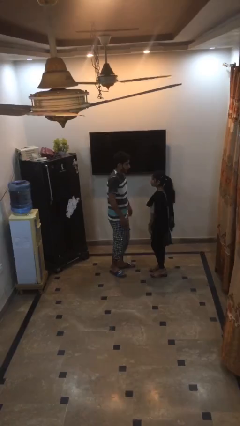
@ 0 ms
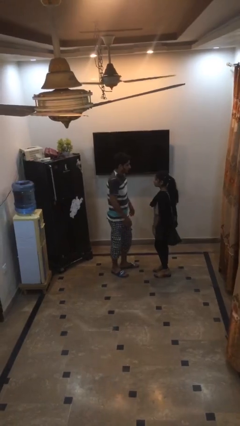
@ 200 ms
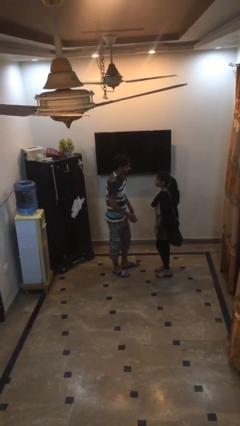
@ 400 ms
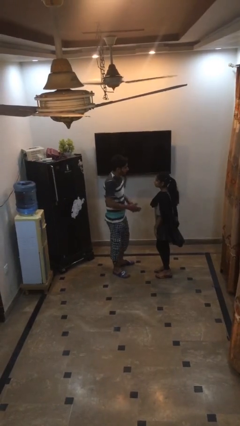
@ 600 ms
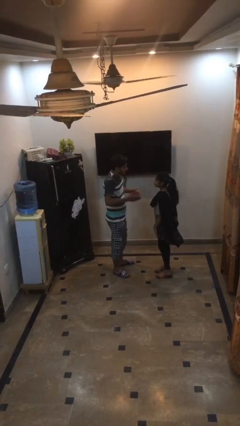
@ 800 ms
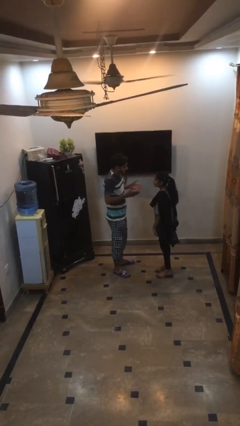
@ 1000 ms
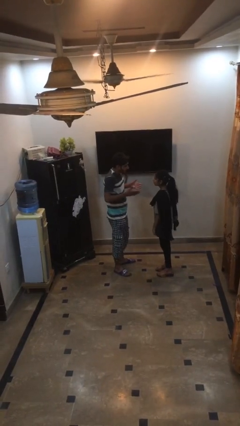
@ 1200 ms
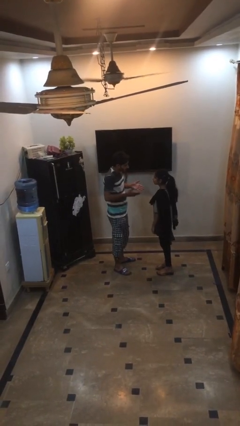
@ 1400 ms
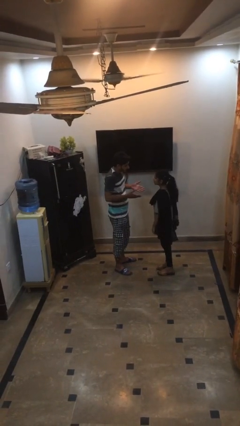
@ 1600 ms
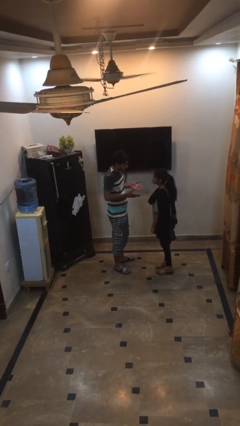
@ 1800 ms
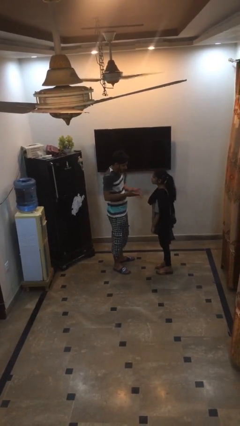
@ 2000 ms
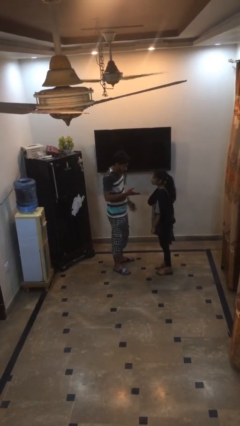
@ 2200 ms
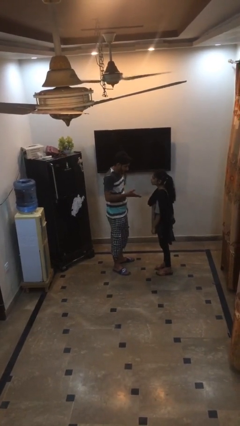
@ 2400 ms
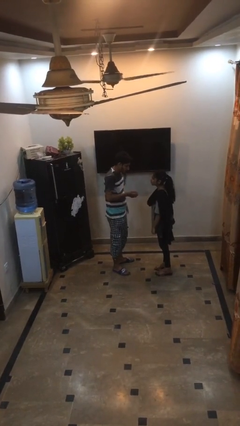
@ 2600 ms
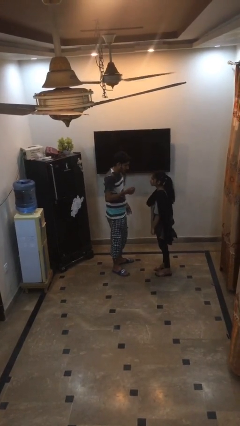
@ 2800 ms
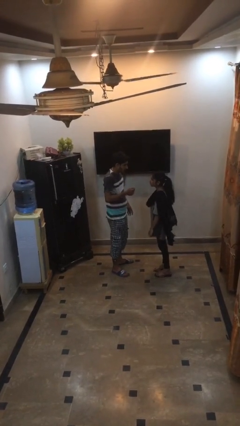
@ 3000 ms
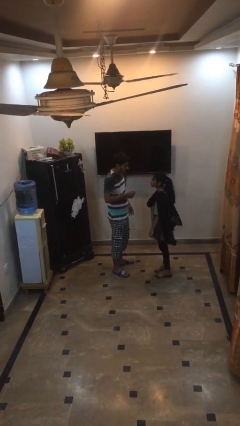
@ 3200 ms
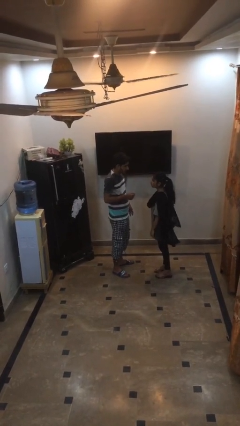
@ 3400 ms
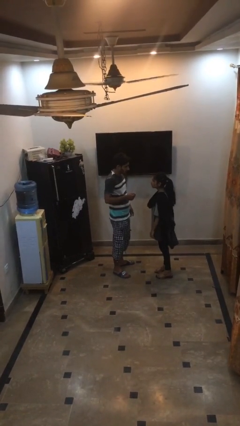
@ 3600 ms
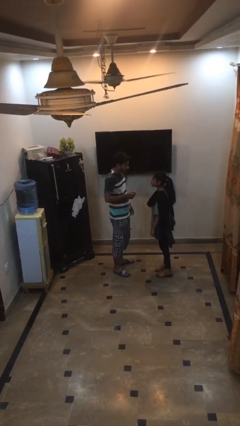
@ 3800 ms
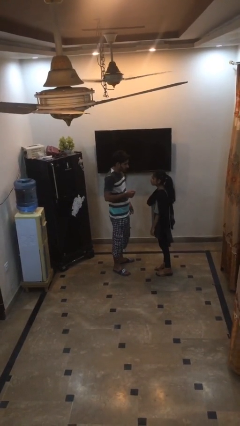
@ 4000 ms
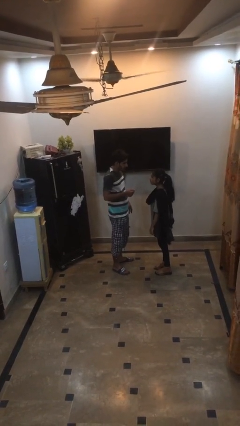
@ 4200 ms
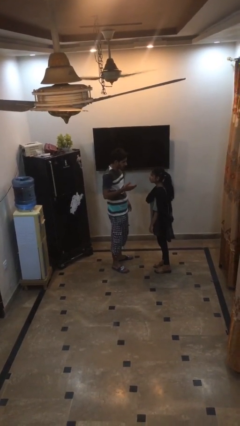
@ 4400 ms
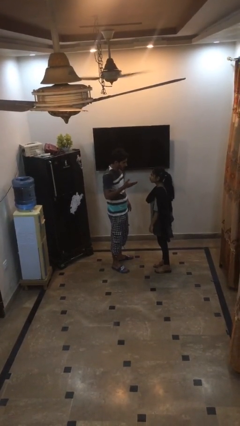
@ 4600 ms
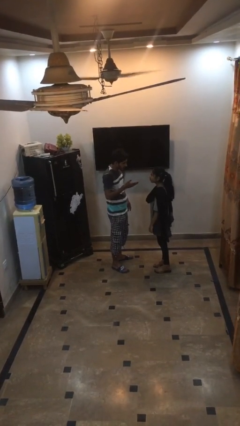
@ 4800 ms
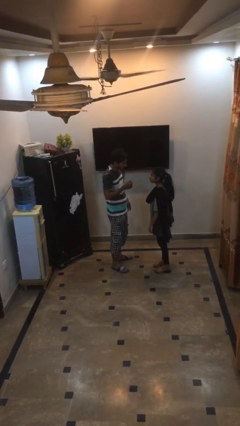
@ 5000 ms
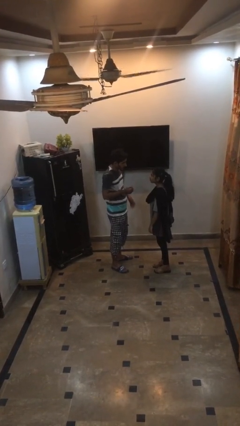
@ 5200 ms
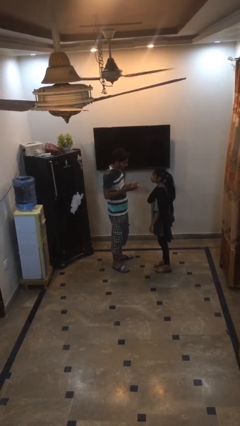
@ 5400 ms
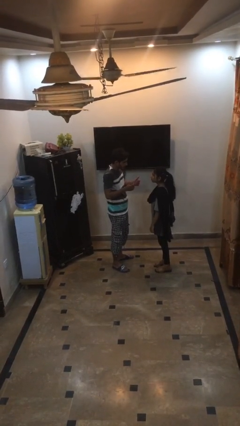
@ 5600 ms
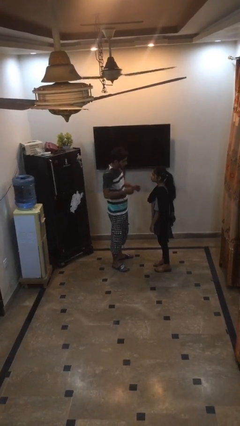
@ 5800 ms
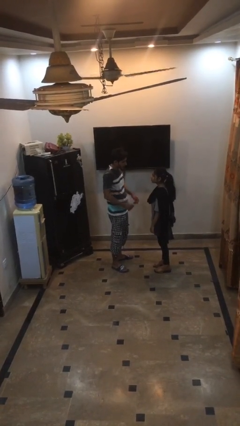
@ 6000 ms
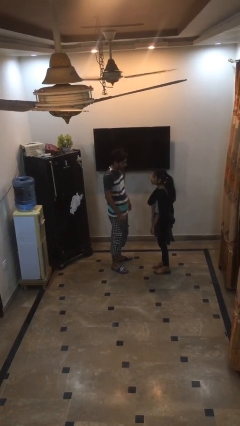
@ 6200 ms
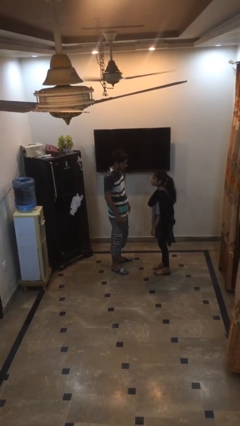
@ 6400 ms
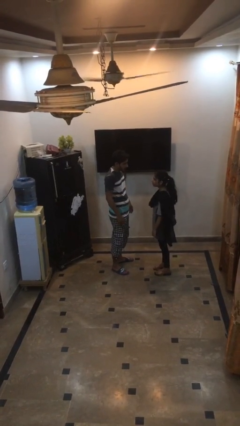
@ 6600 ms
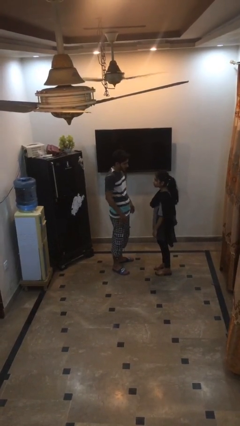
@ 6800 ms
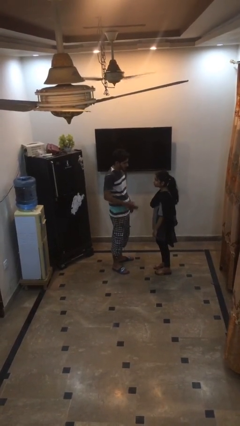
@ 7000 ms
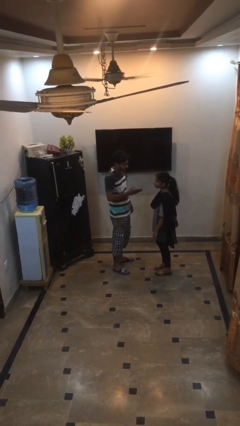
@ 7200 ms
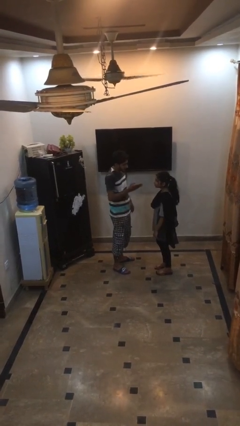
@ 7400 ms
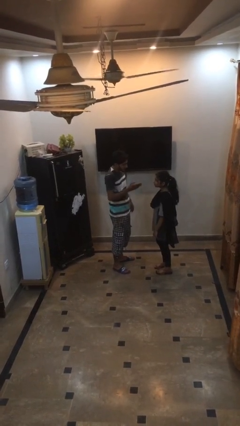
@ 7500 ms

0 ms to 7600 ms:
person talks to person

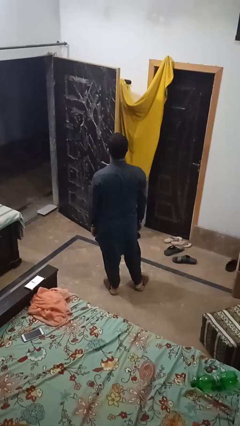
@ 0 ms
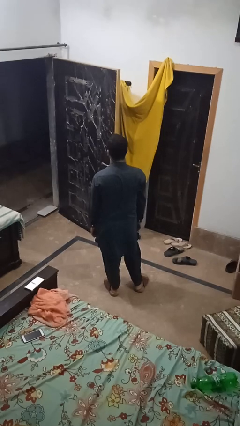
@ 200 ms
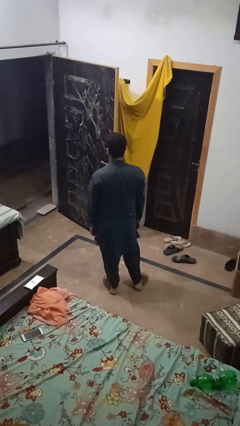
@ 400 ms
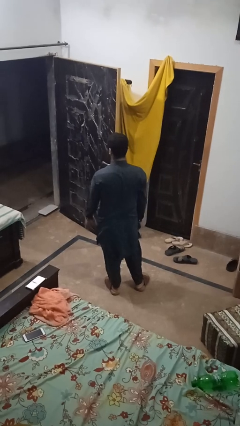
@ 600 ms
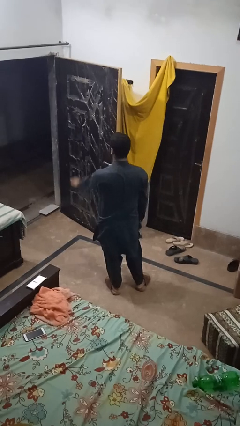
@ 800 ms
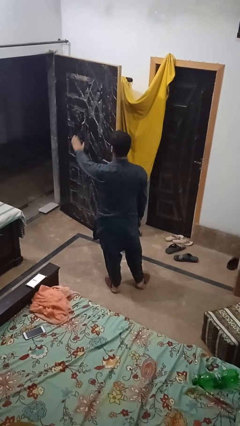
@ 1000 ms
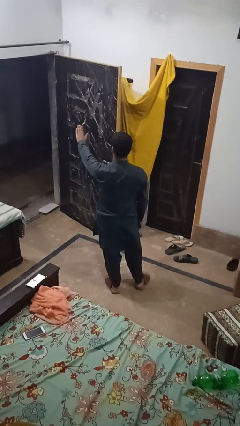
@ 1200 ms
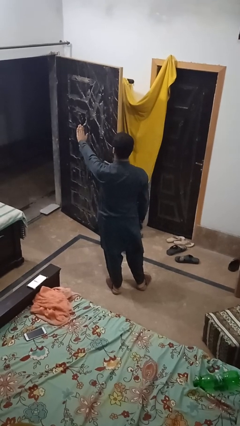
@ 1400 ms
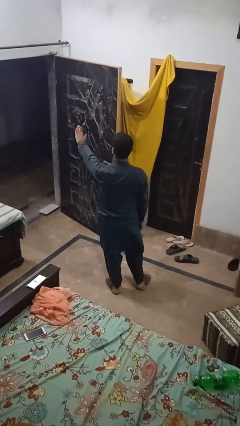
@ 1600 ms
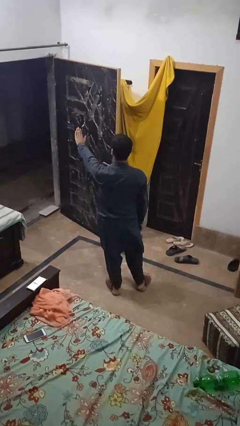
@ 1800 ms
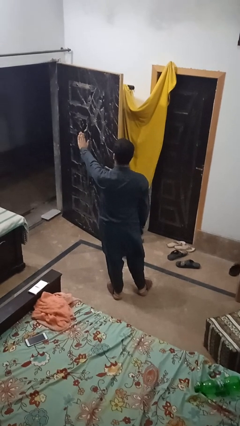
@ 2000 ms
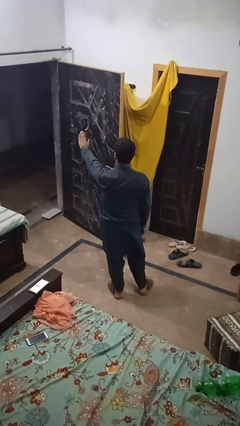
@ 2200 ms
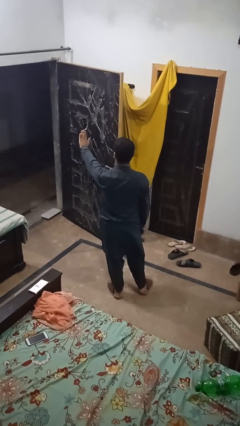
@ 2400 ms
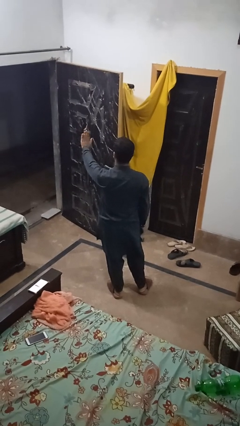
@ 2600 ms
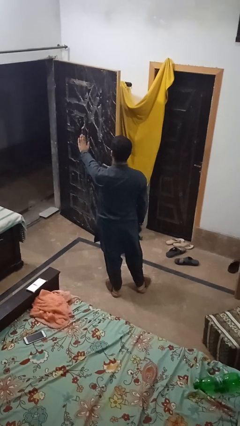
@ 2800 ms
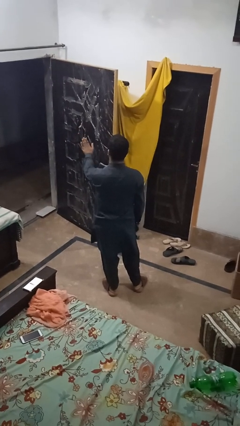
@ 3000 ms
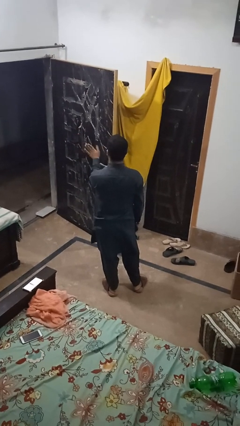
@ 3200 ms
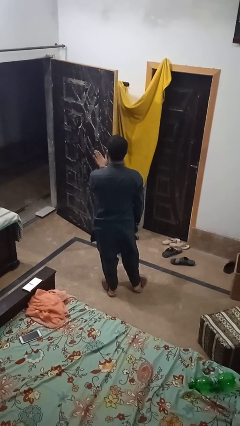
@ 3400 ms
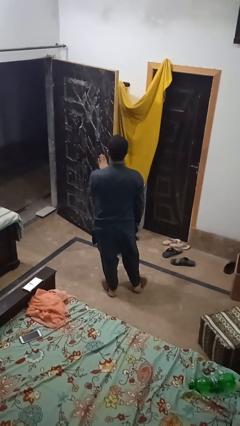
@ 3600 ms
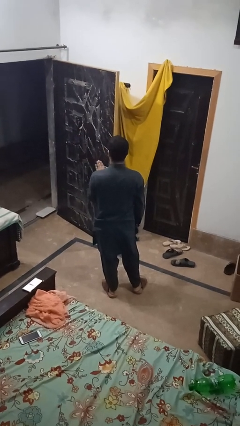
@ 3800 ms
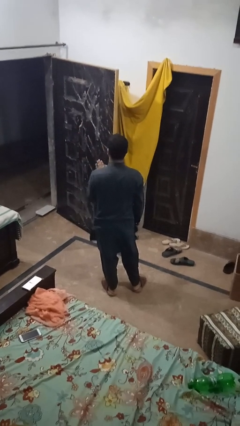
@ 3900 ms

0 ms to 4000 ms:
person gestures stop

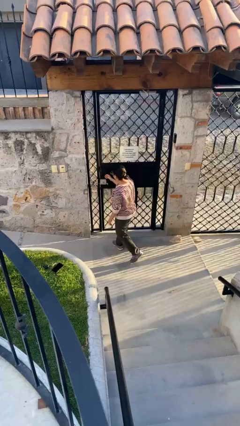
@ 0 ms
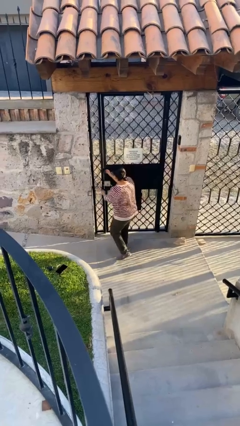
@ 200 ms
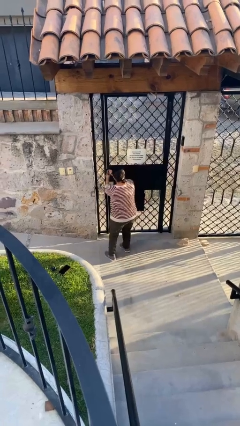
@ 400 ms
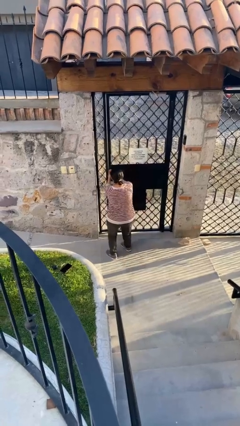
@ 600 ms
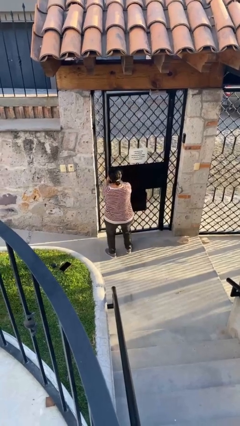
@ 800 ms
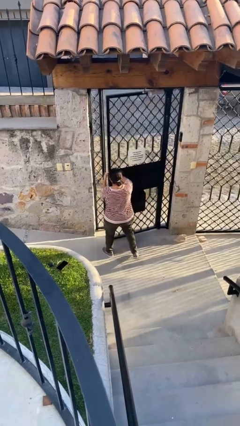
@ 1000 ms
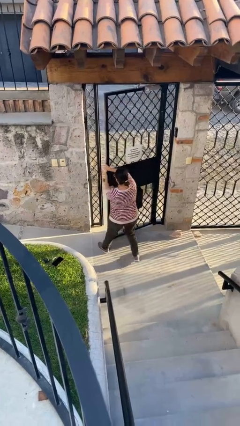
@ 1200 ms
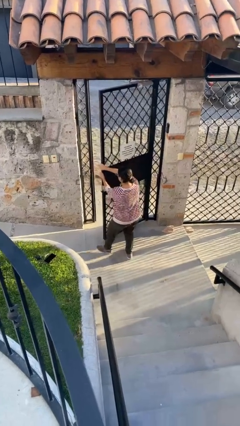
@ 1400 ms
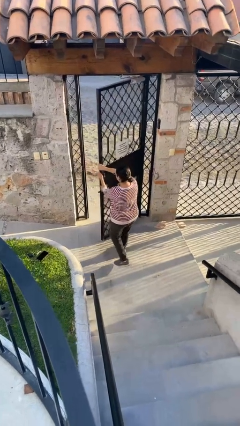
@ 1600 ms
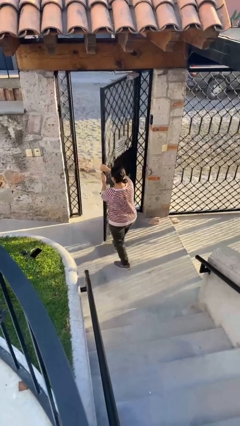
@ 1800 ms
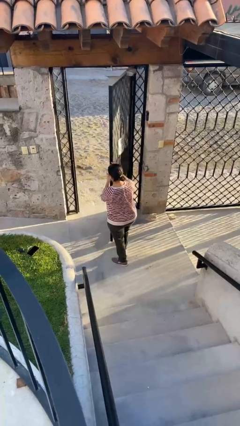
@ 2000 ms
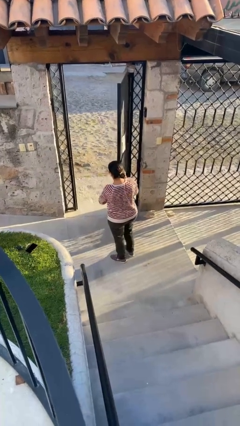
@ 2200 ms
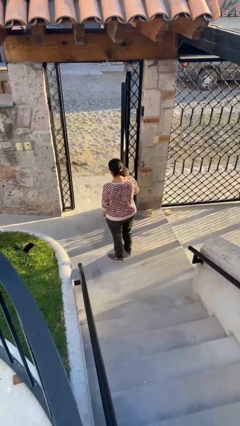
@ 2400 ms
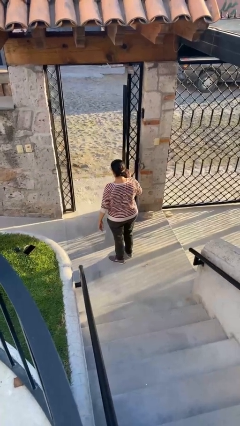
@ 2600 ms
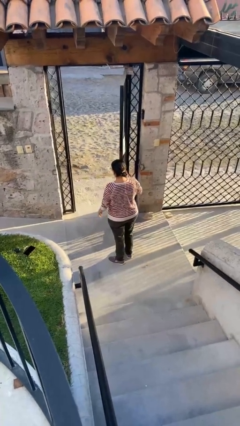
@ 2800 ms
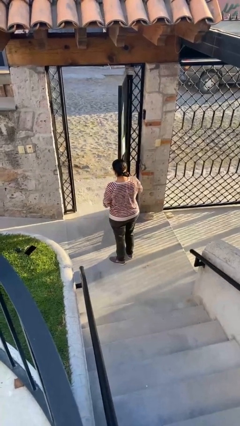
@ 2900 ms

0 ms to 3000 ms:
person opens facility door

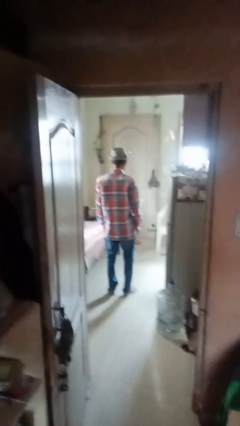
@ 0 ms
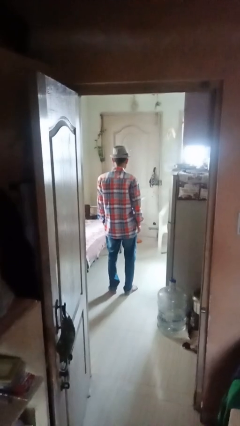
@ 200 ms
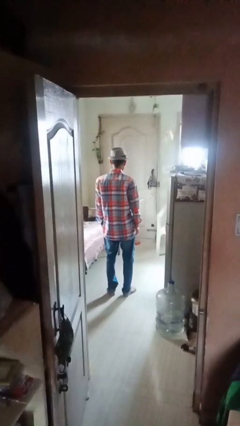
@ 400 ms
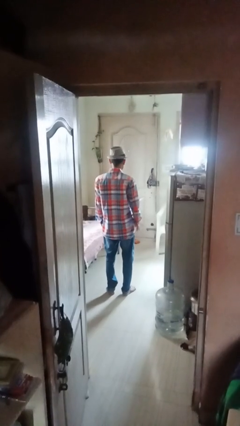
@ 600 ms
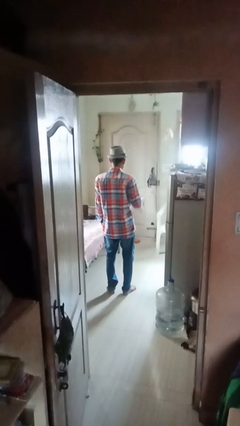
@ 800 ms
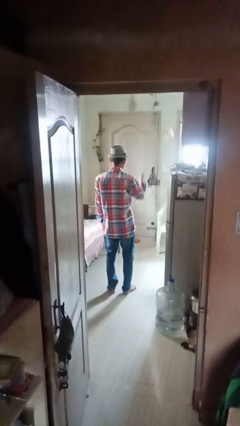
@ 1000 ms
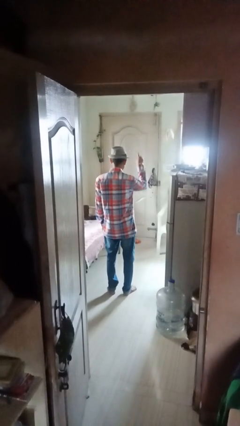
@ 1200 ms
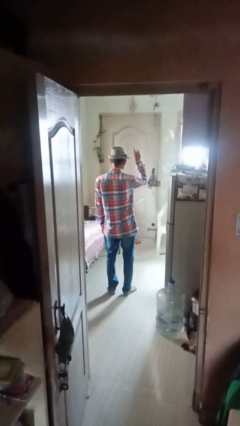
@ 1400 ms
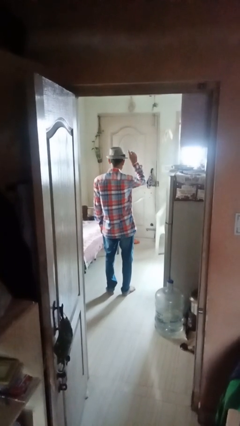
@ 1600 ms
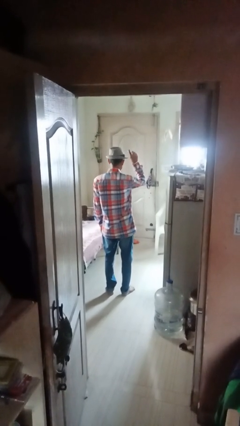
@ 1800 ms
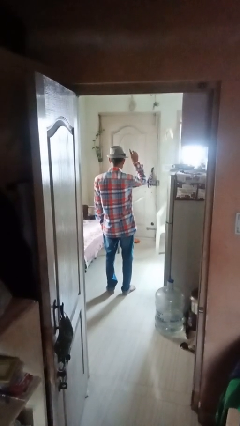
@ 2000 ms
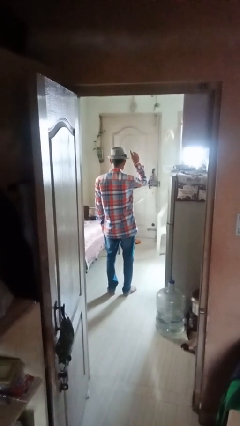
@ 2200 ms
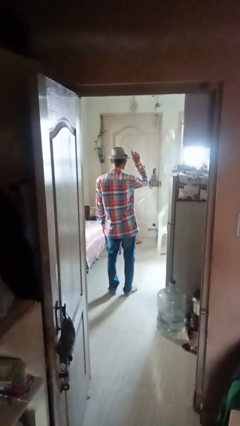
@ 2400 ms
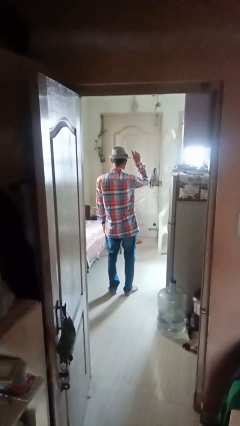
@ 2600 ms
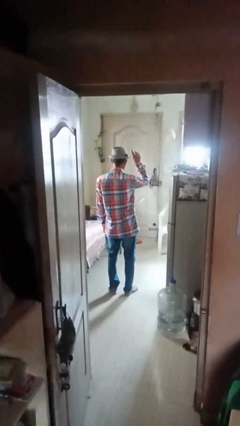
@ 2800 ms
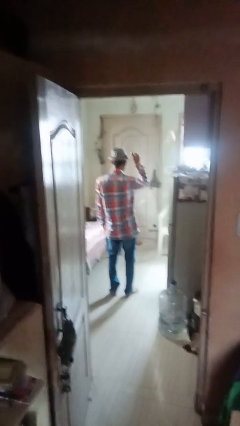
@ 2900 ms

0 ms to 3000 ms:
person gestures number one

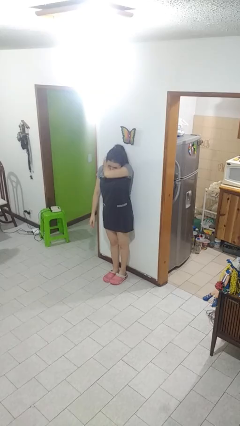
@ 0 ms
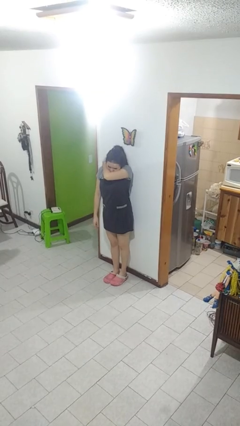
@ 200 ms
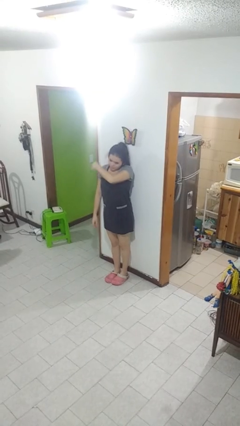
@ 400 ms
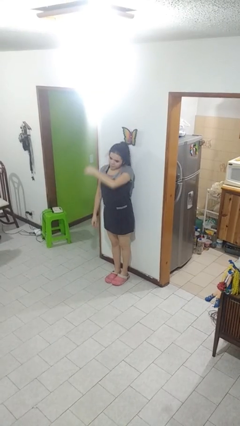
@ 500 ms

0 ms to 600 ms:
person sneezes into arm
